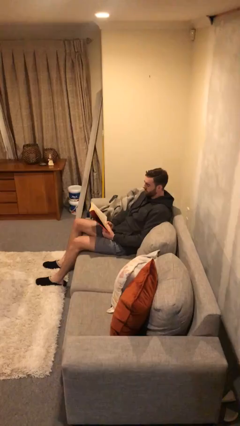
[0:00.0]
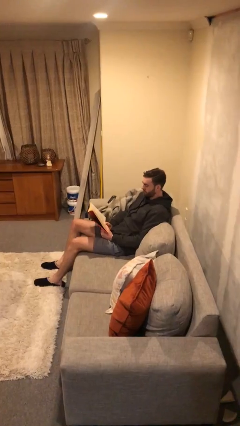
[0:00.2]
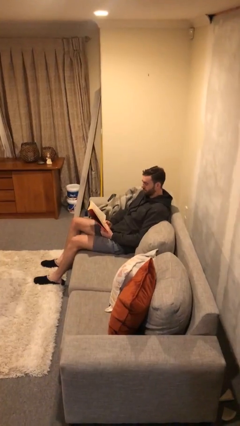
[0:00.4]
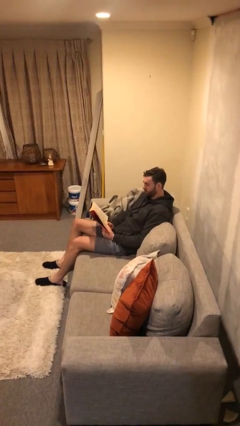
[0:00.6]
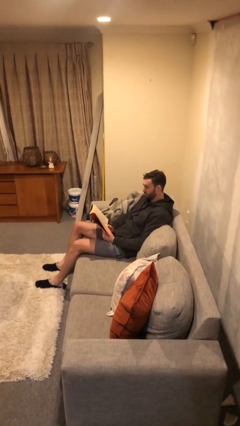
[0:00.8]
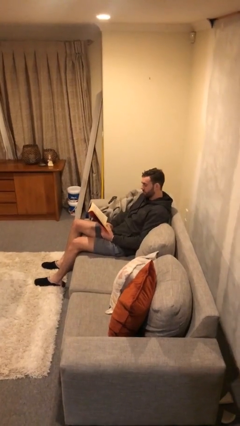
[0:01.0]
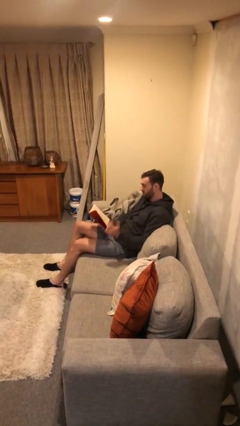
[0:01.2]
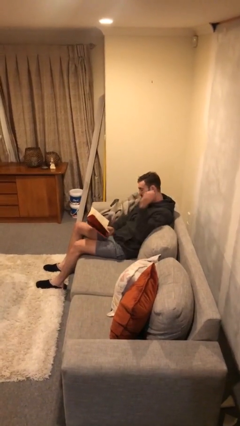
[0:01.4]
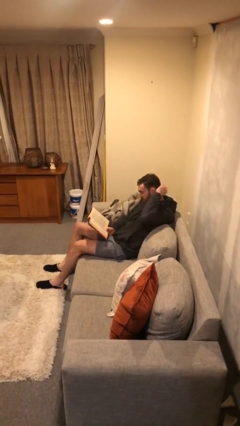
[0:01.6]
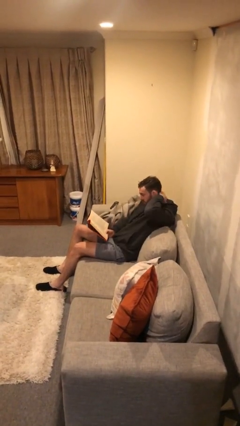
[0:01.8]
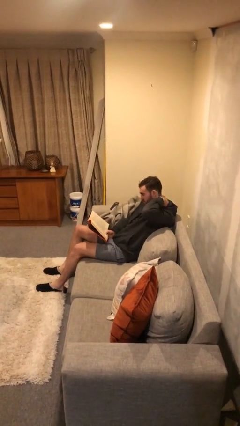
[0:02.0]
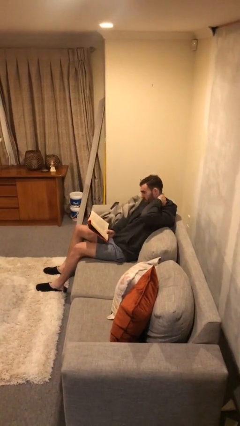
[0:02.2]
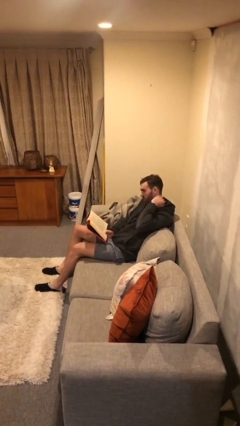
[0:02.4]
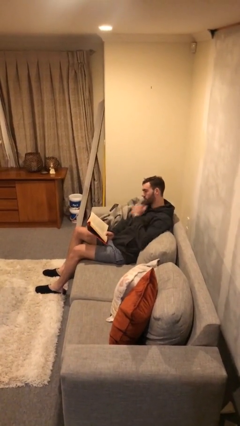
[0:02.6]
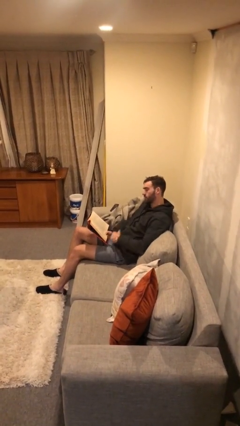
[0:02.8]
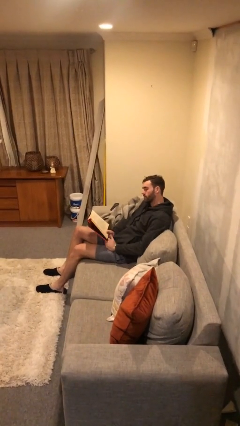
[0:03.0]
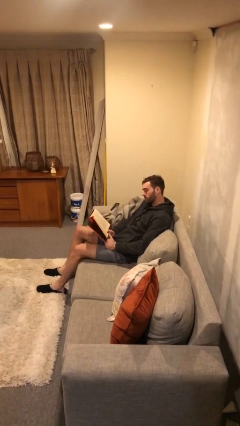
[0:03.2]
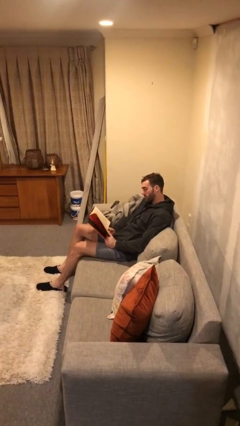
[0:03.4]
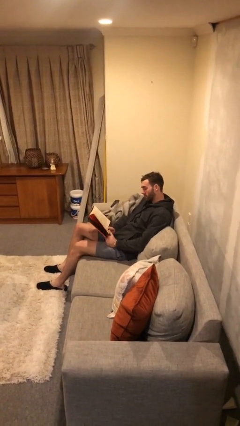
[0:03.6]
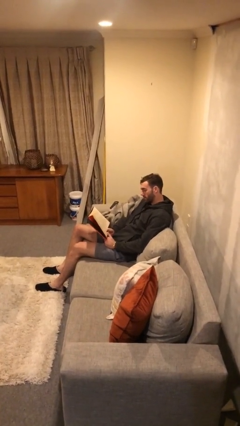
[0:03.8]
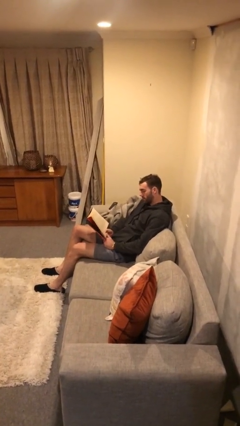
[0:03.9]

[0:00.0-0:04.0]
person reads document

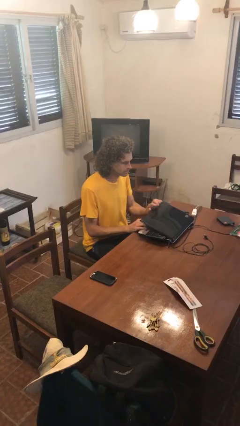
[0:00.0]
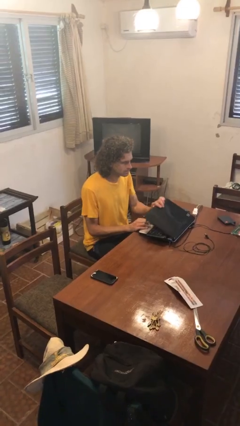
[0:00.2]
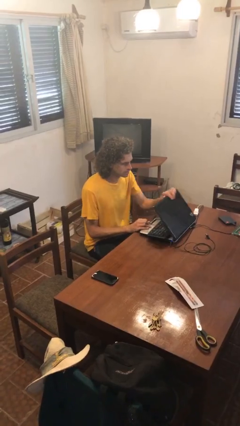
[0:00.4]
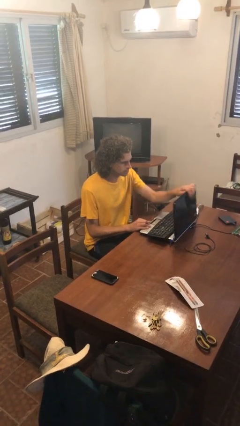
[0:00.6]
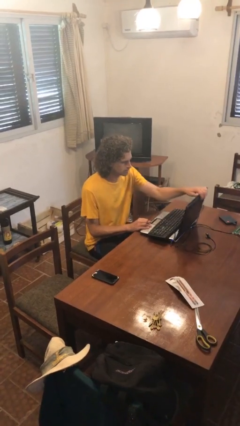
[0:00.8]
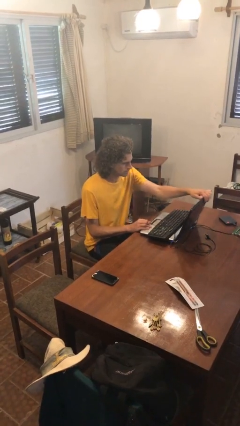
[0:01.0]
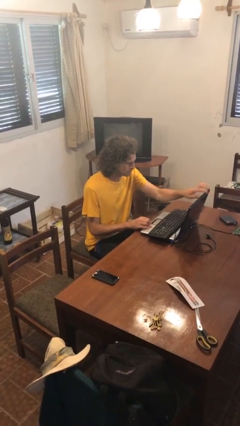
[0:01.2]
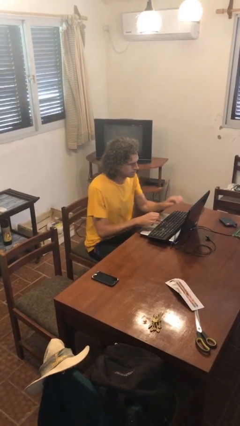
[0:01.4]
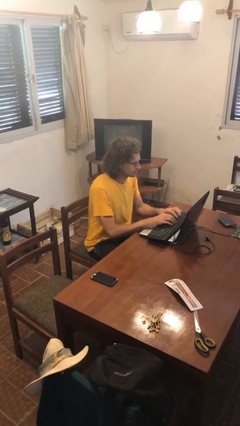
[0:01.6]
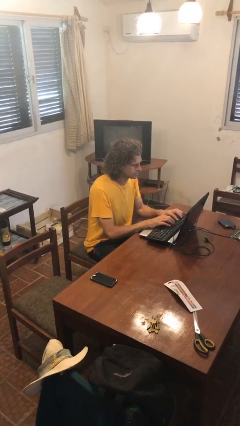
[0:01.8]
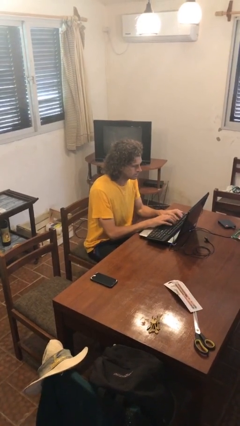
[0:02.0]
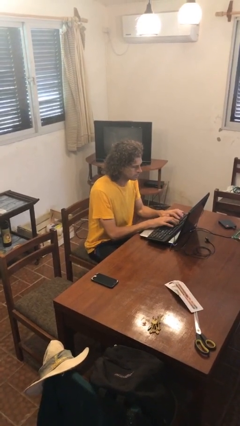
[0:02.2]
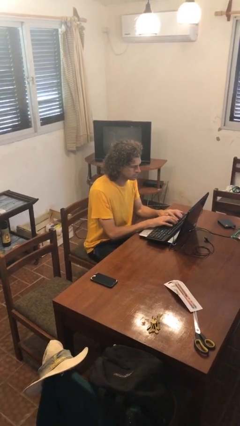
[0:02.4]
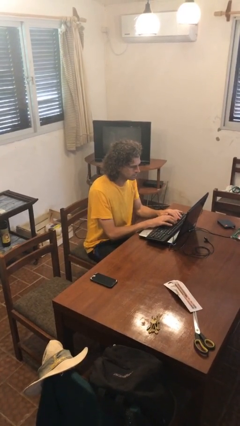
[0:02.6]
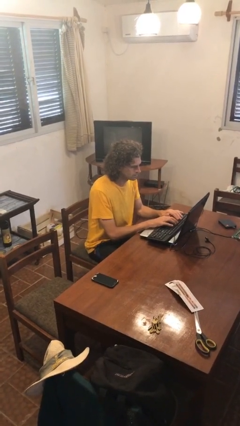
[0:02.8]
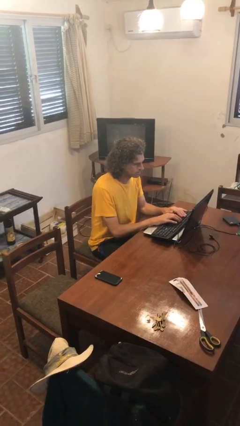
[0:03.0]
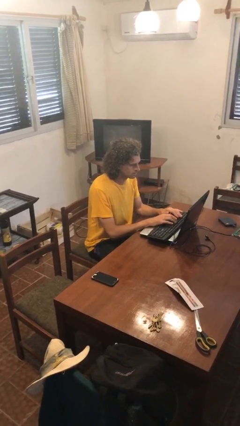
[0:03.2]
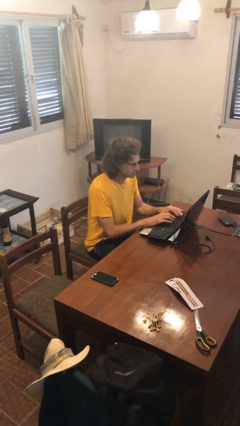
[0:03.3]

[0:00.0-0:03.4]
person interacts with laptop

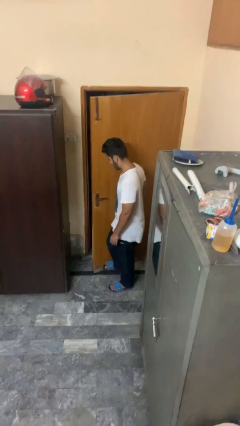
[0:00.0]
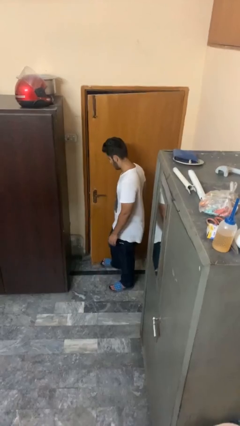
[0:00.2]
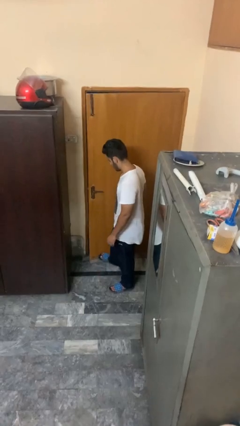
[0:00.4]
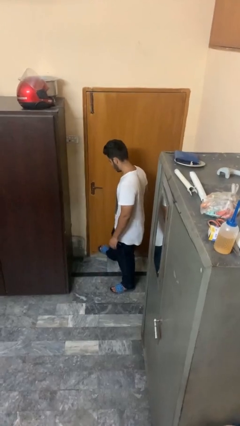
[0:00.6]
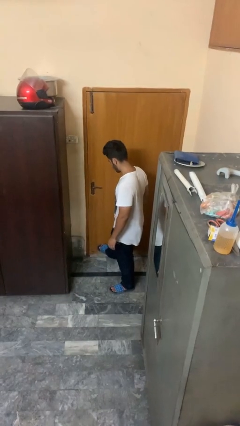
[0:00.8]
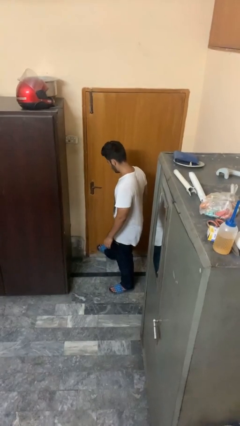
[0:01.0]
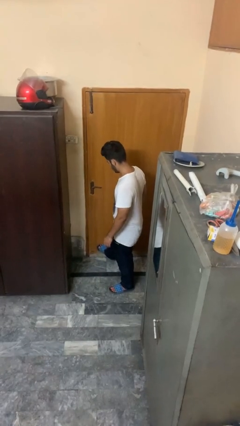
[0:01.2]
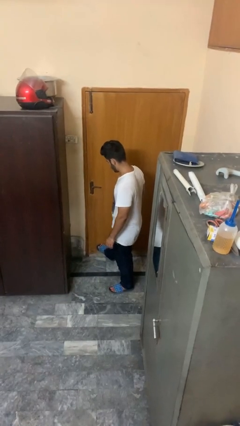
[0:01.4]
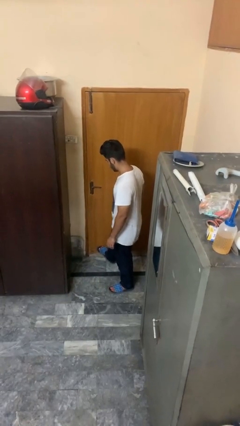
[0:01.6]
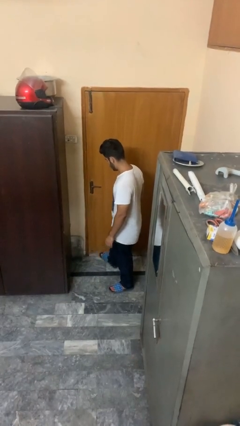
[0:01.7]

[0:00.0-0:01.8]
person closes door with foot

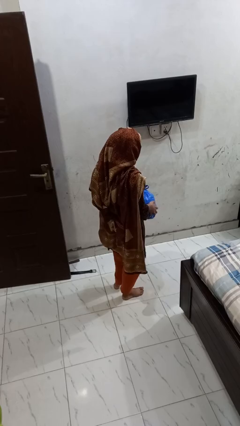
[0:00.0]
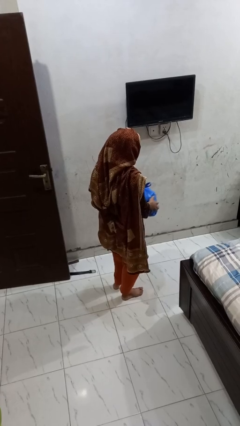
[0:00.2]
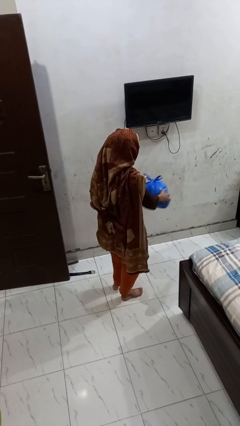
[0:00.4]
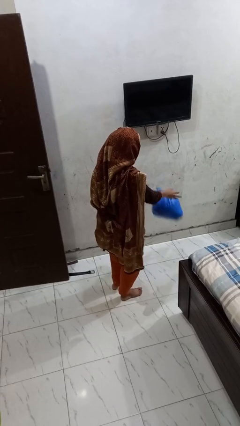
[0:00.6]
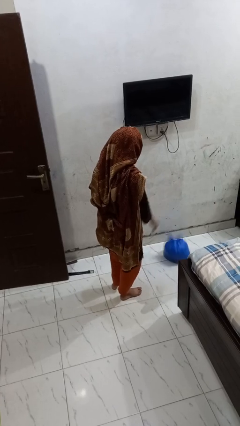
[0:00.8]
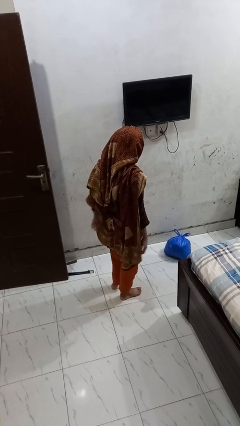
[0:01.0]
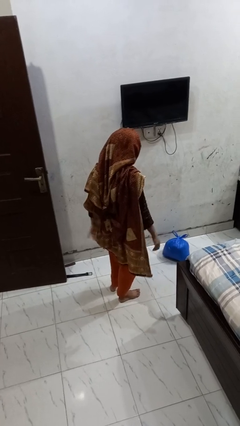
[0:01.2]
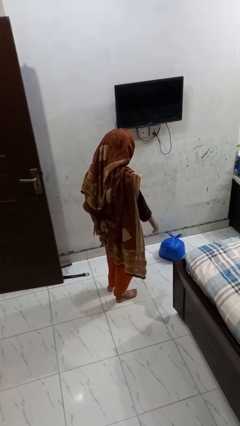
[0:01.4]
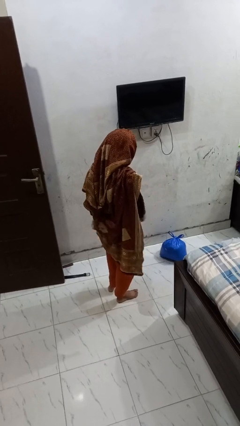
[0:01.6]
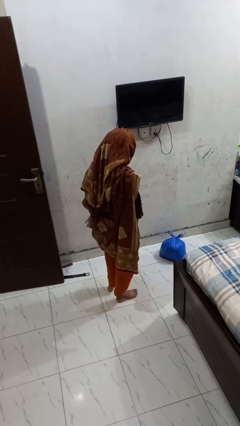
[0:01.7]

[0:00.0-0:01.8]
person throws object to ground

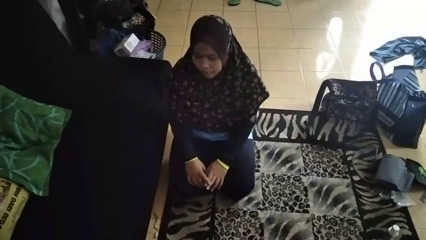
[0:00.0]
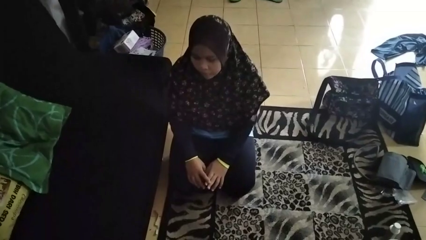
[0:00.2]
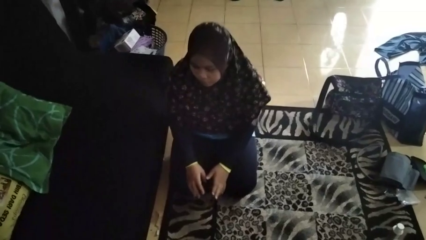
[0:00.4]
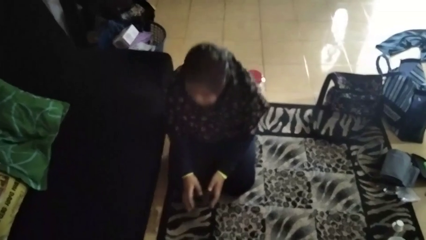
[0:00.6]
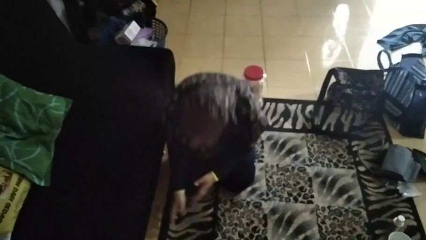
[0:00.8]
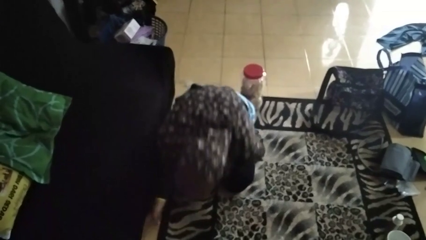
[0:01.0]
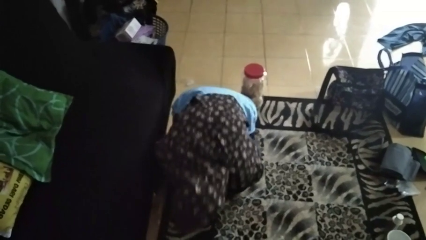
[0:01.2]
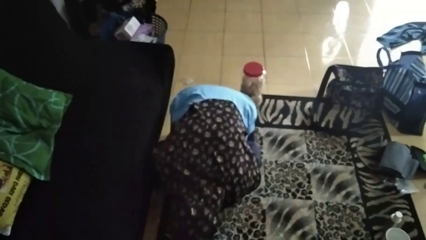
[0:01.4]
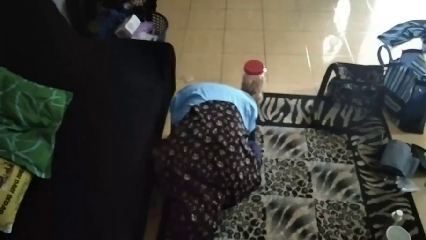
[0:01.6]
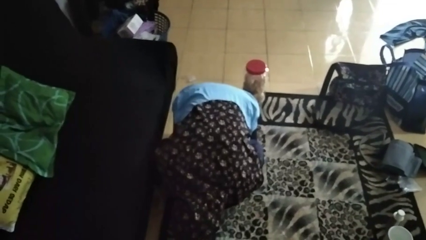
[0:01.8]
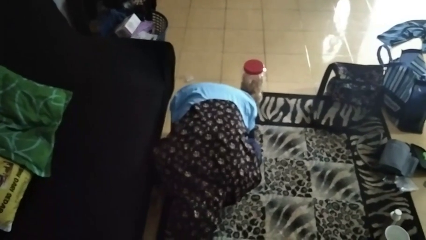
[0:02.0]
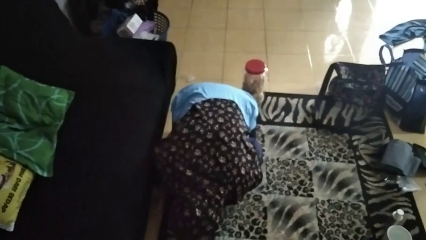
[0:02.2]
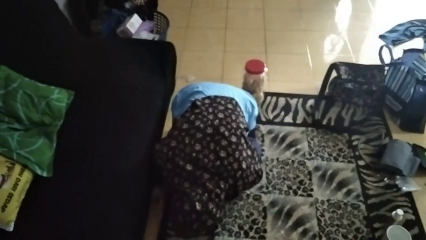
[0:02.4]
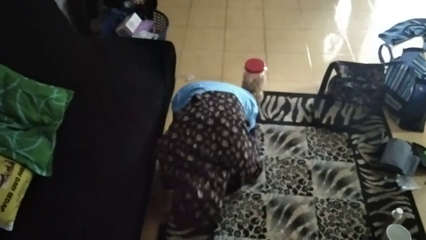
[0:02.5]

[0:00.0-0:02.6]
person searches under couch

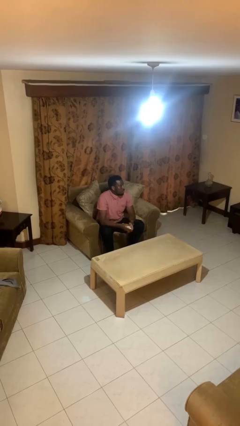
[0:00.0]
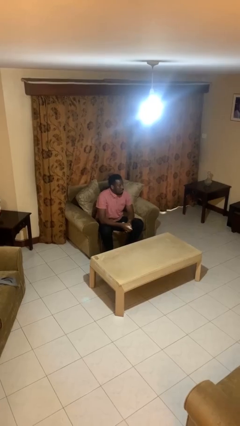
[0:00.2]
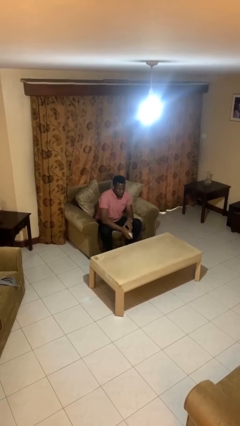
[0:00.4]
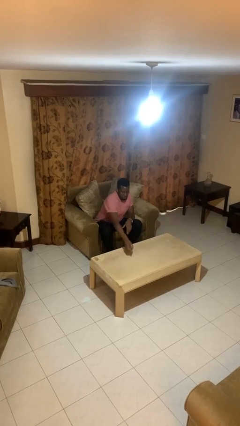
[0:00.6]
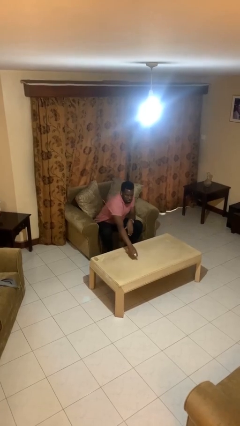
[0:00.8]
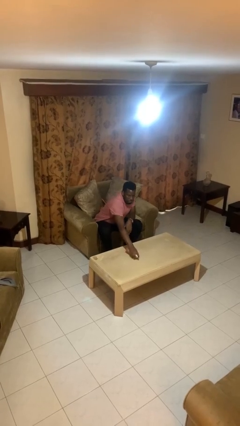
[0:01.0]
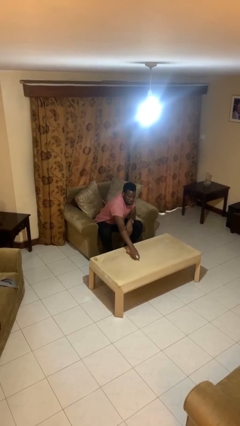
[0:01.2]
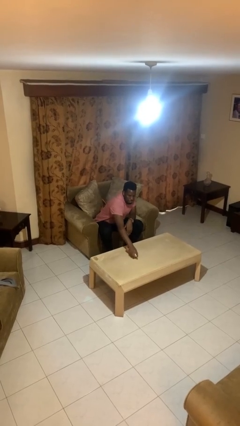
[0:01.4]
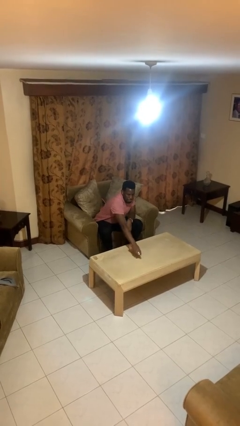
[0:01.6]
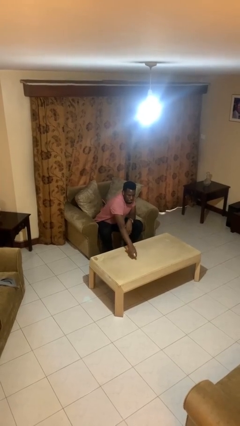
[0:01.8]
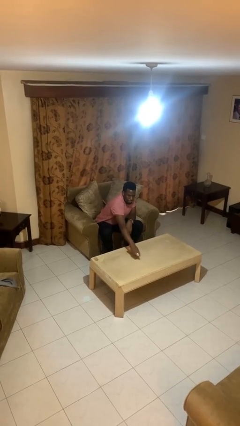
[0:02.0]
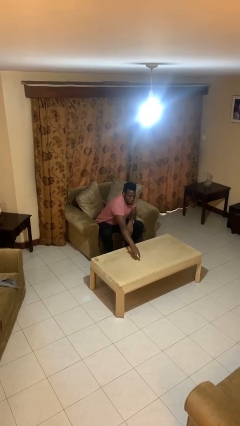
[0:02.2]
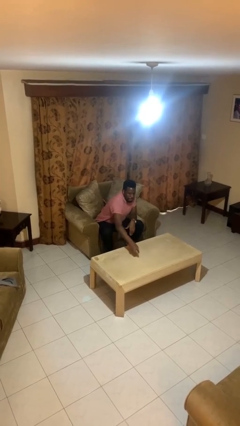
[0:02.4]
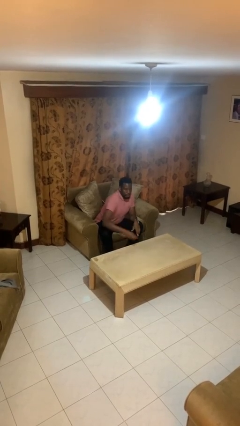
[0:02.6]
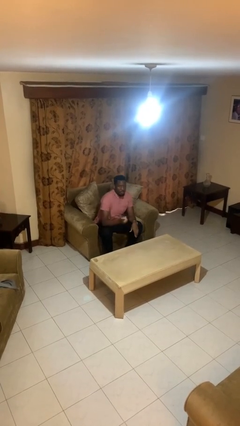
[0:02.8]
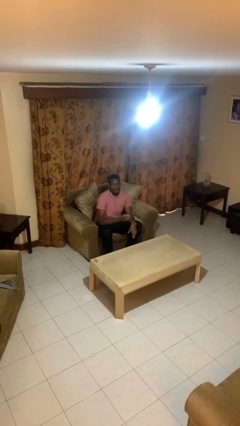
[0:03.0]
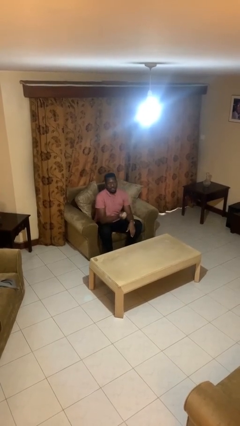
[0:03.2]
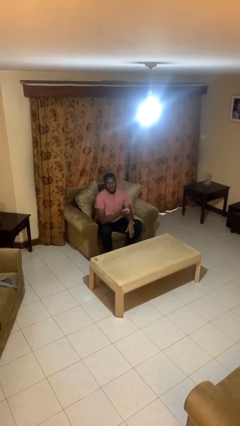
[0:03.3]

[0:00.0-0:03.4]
person sprays from bottle
